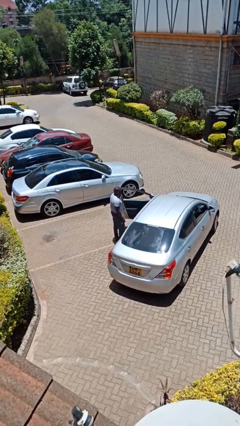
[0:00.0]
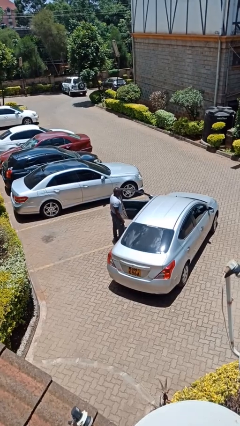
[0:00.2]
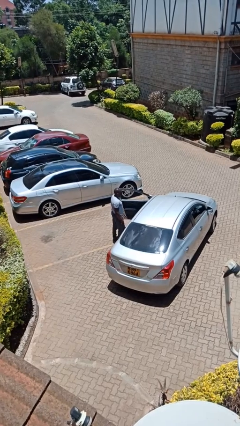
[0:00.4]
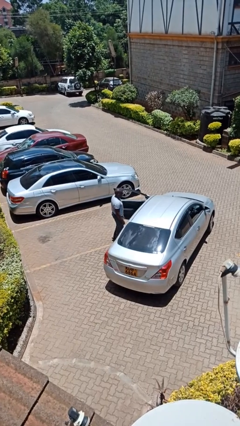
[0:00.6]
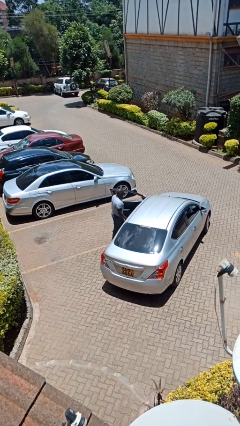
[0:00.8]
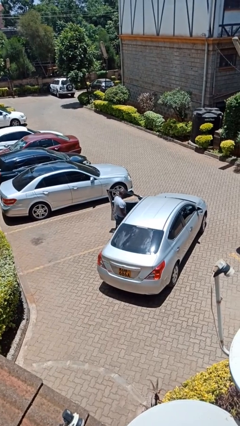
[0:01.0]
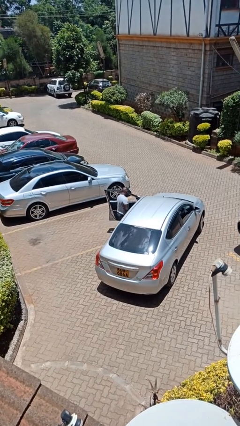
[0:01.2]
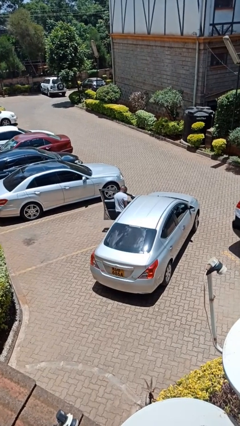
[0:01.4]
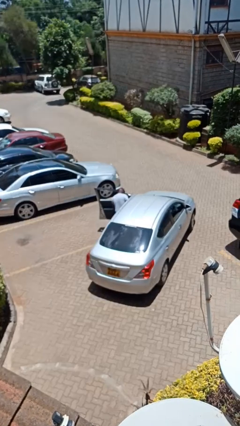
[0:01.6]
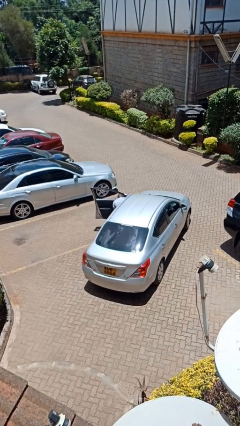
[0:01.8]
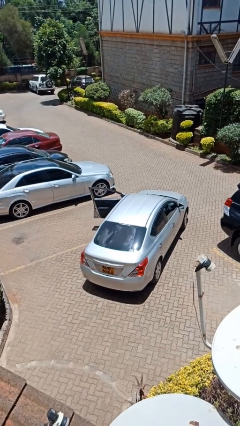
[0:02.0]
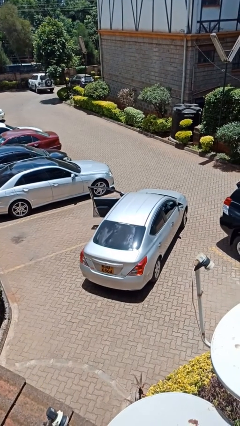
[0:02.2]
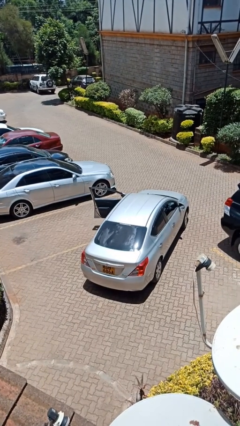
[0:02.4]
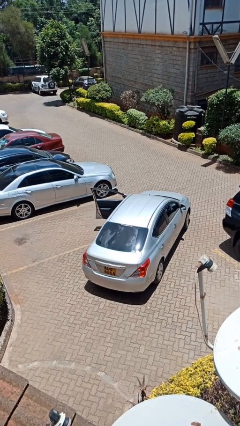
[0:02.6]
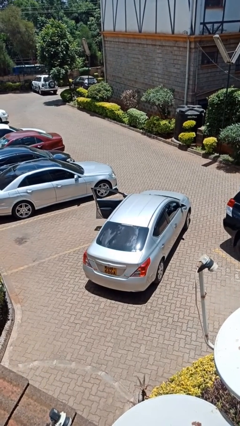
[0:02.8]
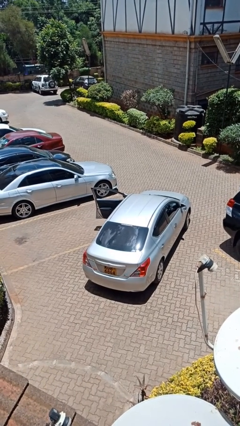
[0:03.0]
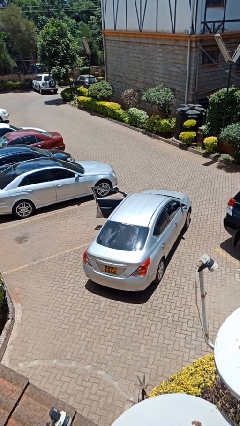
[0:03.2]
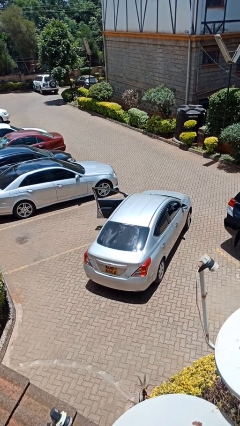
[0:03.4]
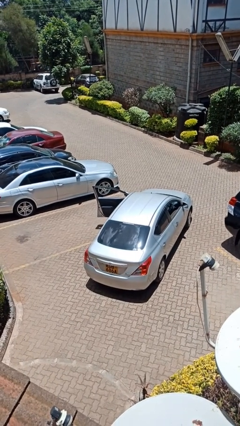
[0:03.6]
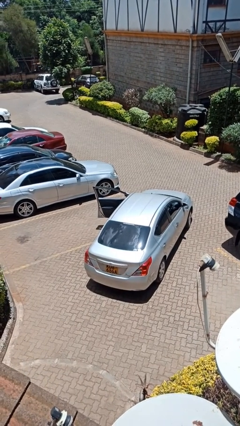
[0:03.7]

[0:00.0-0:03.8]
person enters car

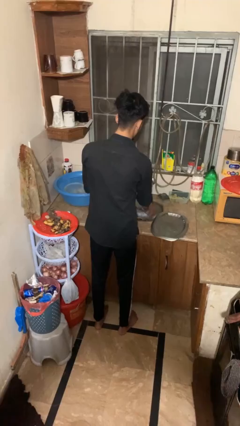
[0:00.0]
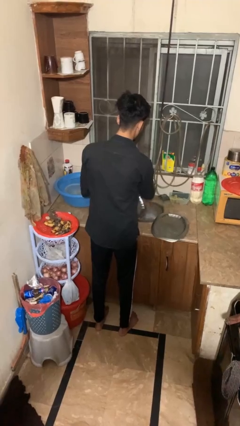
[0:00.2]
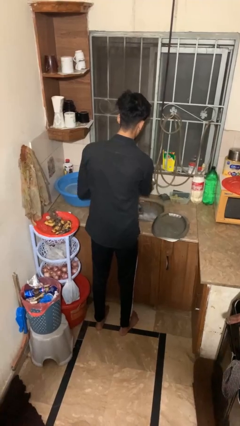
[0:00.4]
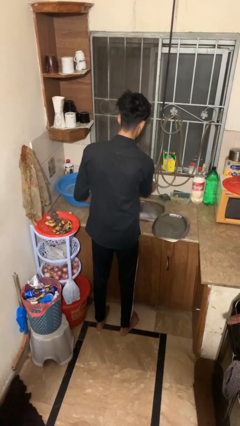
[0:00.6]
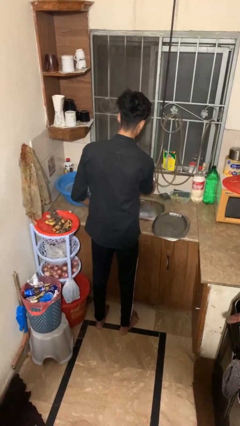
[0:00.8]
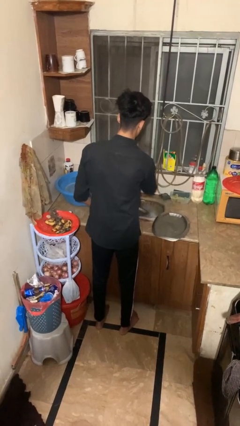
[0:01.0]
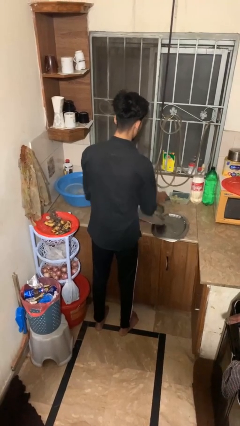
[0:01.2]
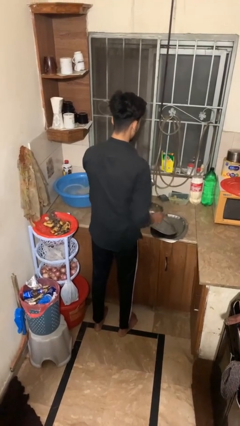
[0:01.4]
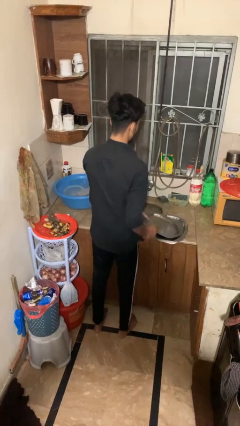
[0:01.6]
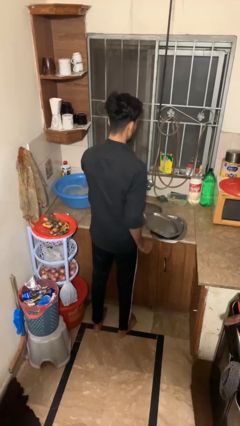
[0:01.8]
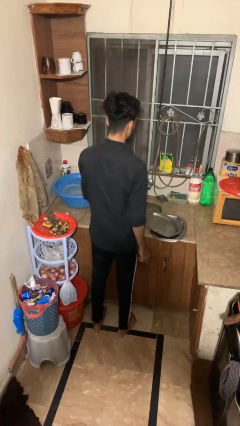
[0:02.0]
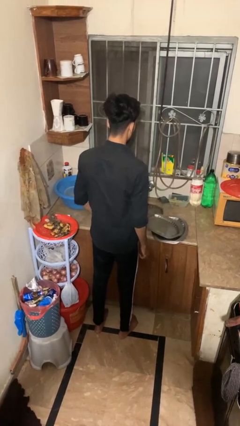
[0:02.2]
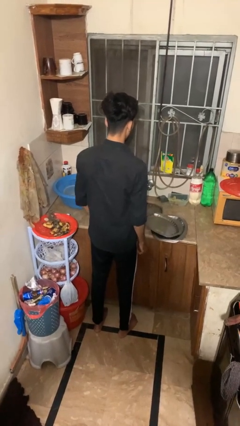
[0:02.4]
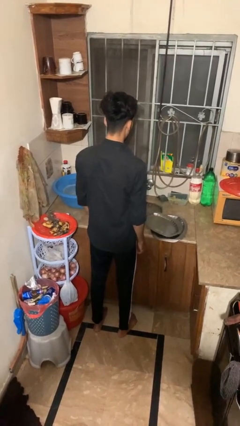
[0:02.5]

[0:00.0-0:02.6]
person closes dishwasher

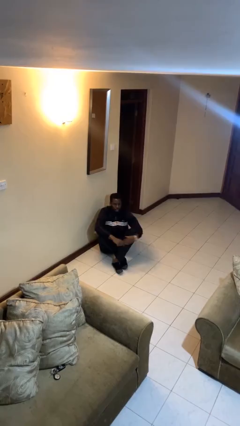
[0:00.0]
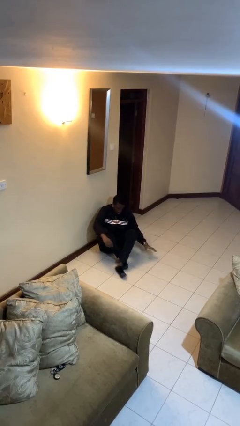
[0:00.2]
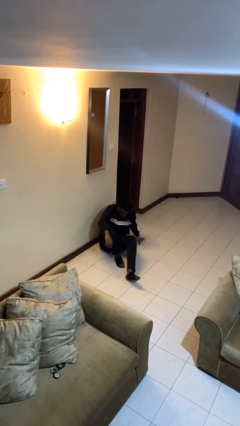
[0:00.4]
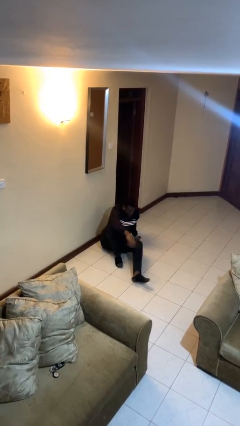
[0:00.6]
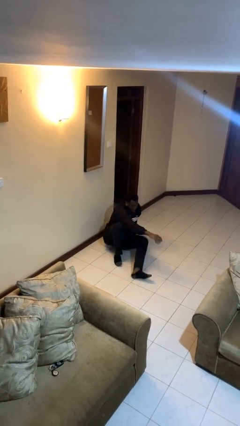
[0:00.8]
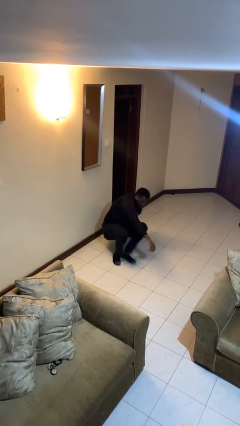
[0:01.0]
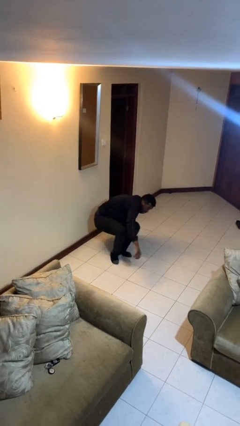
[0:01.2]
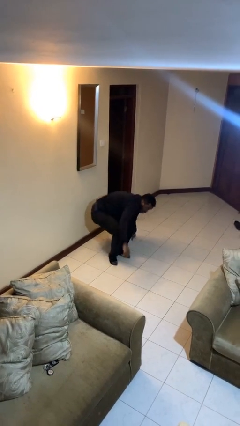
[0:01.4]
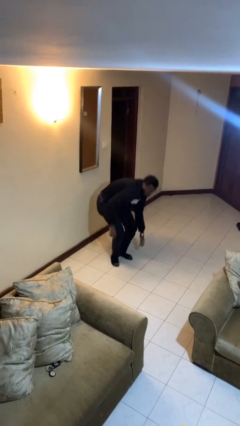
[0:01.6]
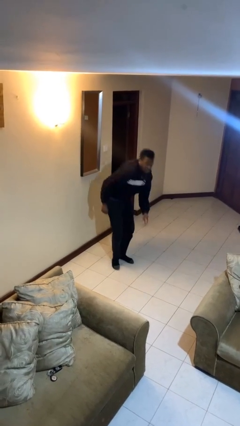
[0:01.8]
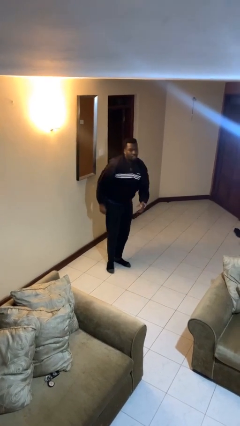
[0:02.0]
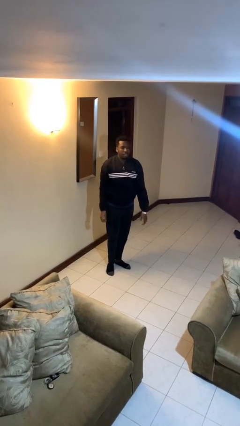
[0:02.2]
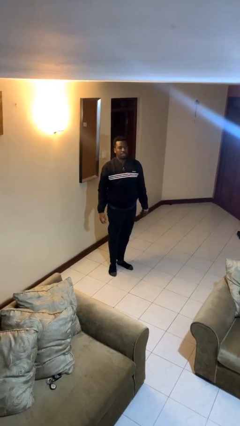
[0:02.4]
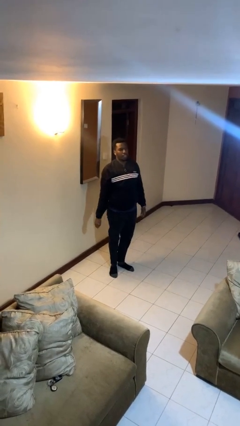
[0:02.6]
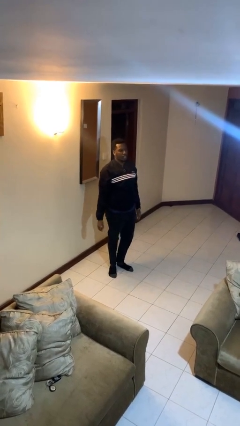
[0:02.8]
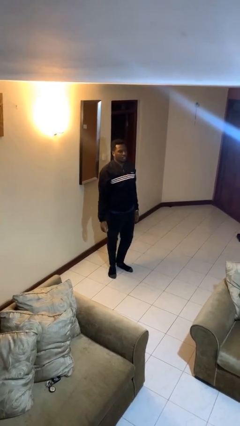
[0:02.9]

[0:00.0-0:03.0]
person stands up from floor

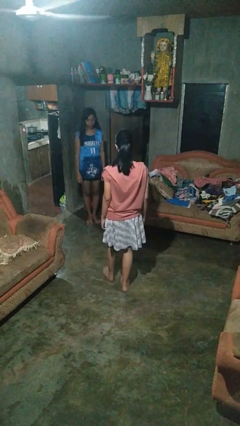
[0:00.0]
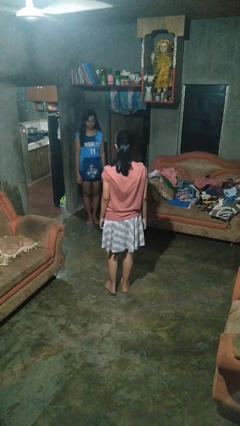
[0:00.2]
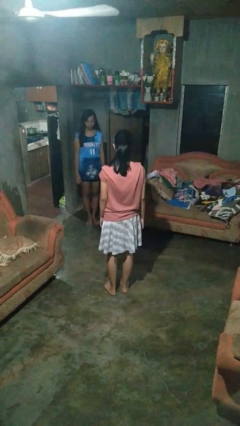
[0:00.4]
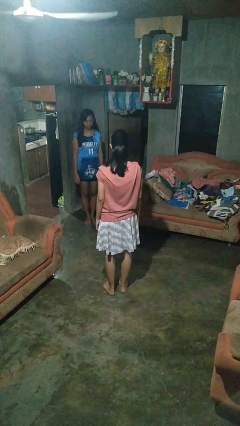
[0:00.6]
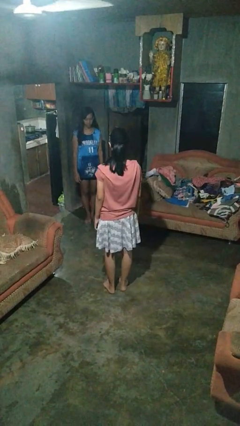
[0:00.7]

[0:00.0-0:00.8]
person kicks object to person

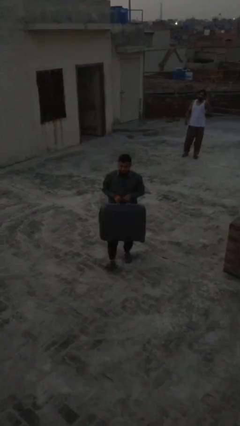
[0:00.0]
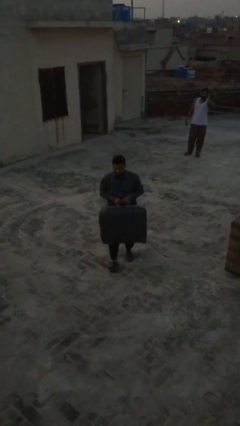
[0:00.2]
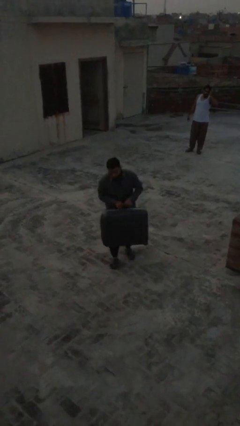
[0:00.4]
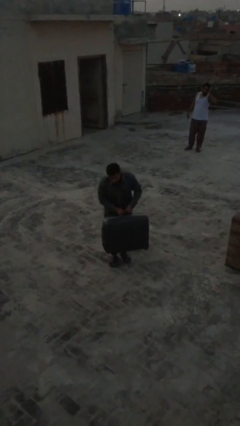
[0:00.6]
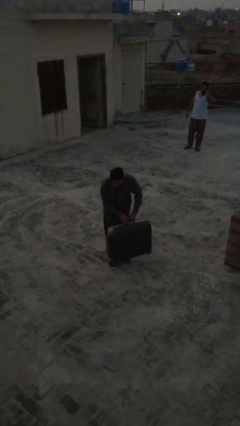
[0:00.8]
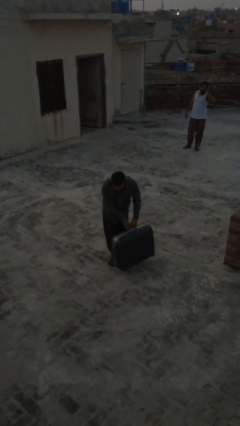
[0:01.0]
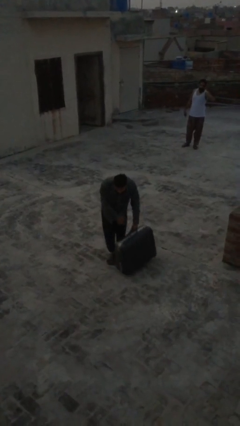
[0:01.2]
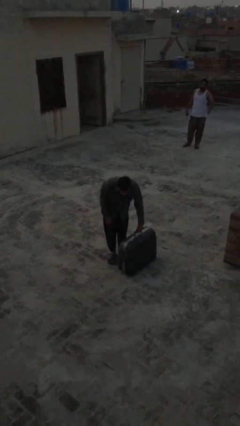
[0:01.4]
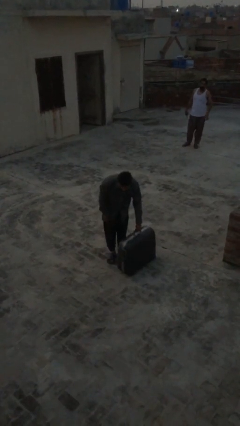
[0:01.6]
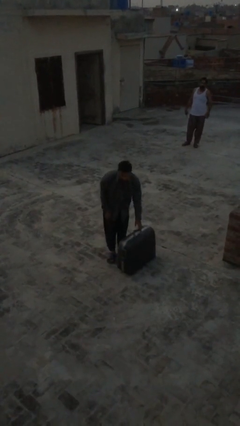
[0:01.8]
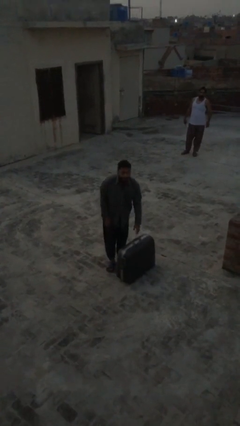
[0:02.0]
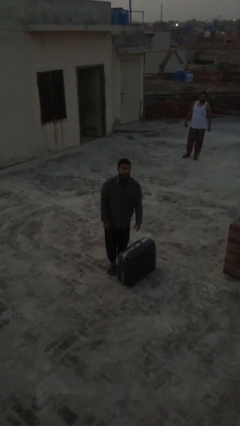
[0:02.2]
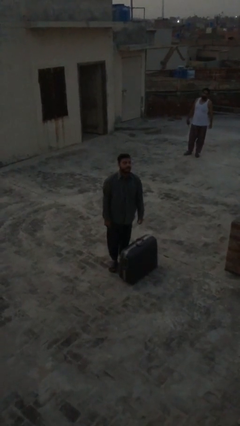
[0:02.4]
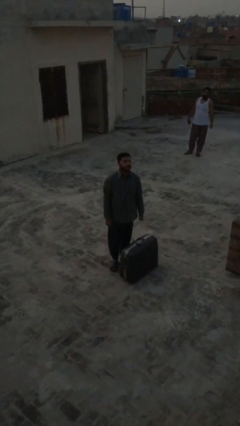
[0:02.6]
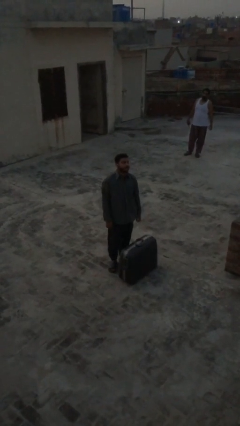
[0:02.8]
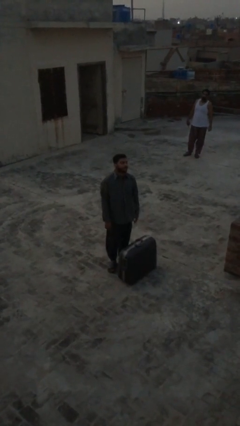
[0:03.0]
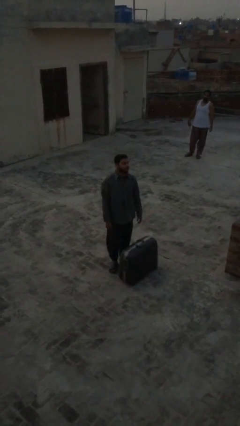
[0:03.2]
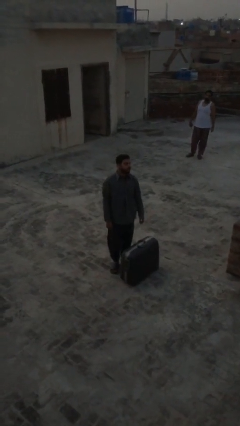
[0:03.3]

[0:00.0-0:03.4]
person puts down object on floor

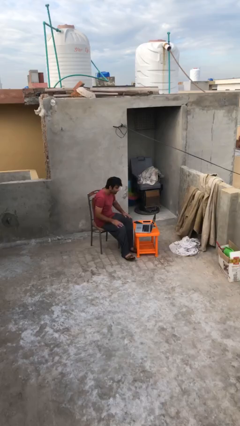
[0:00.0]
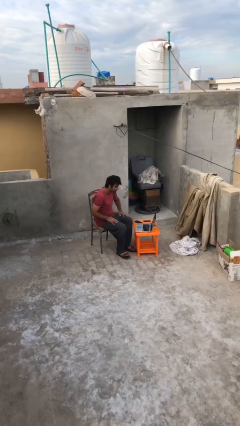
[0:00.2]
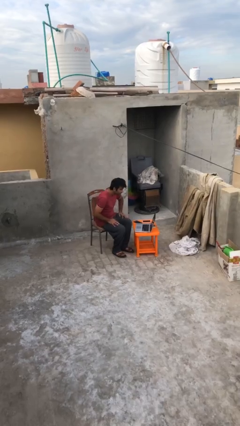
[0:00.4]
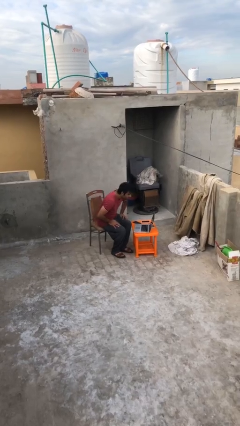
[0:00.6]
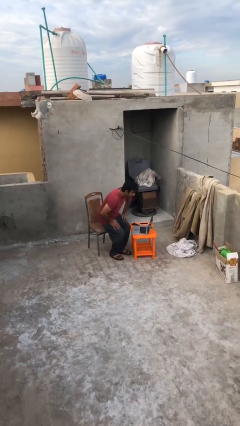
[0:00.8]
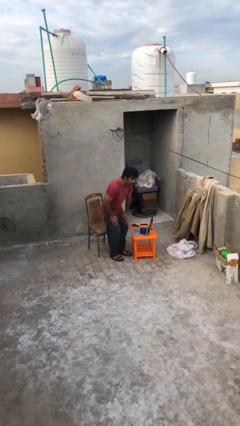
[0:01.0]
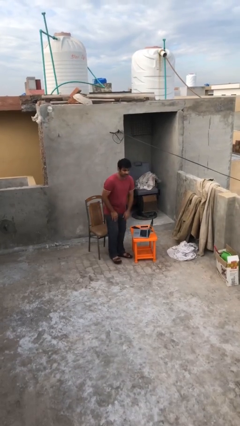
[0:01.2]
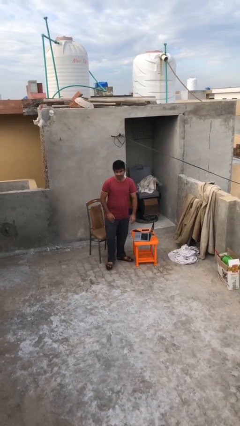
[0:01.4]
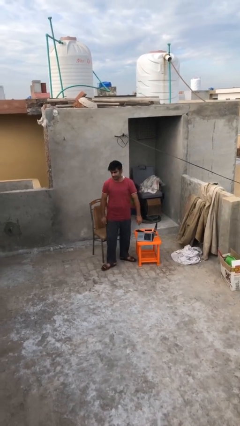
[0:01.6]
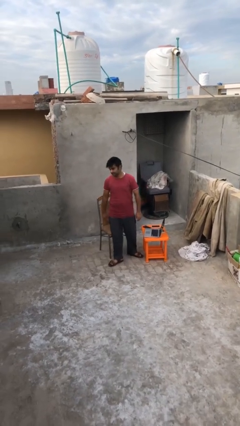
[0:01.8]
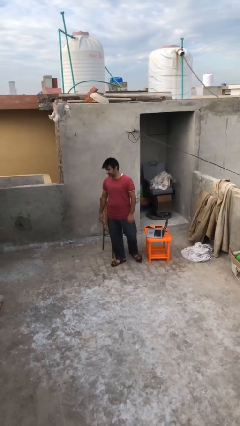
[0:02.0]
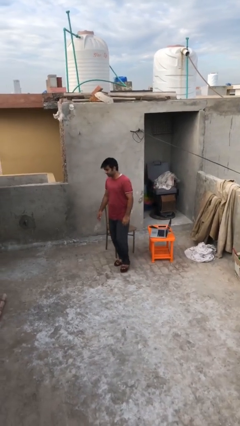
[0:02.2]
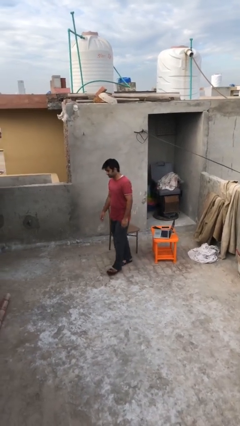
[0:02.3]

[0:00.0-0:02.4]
person stands up

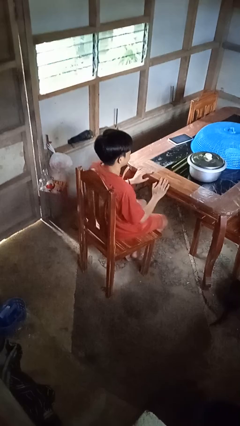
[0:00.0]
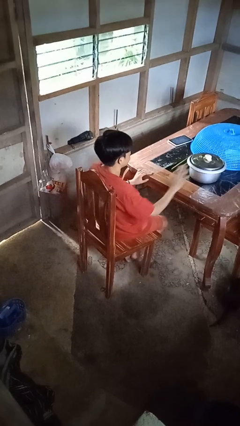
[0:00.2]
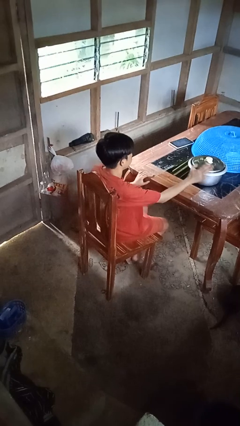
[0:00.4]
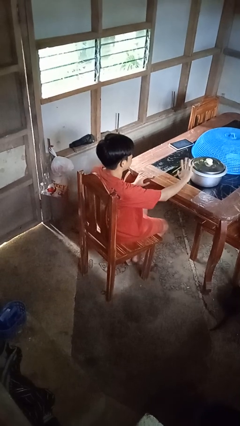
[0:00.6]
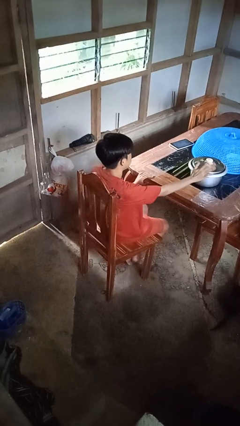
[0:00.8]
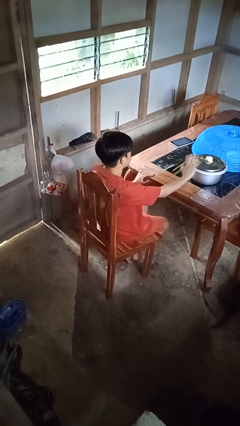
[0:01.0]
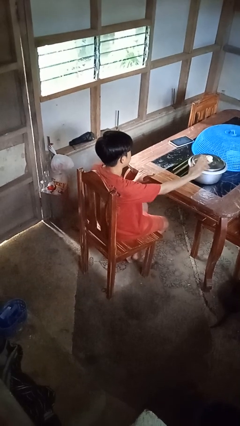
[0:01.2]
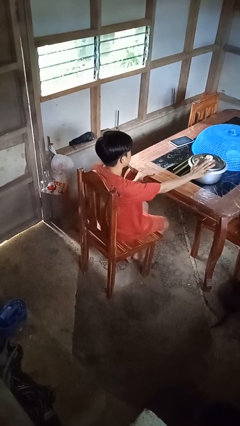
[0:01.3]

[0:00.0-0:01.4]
person waves hand over object
